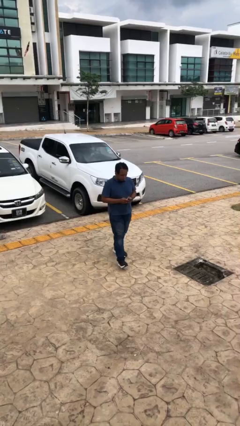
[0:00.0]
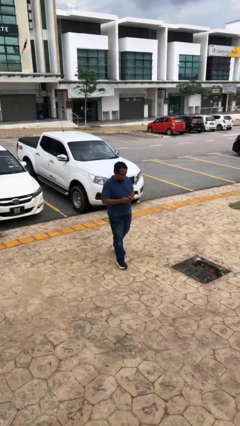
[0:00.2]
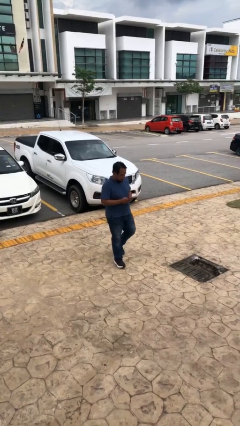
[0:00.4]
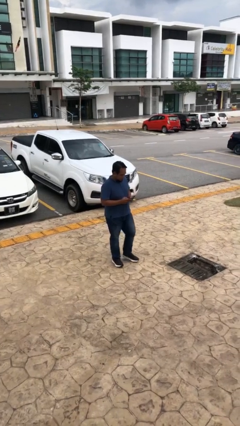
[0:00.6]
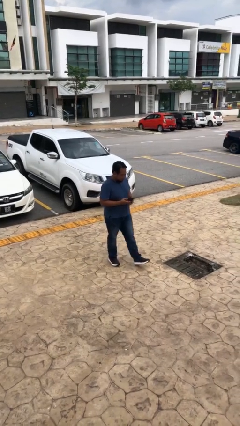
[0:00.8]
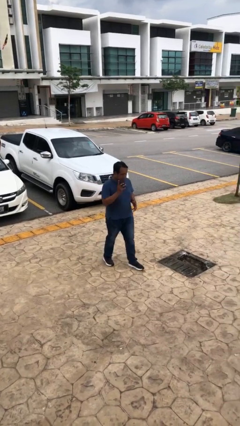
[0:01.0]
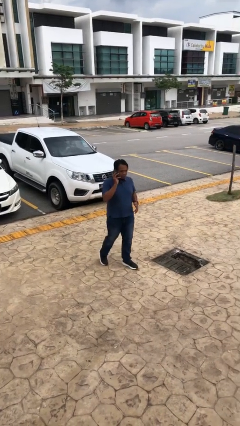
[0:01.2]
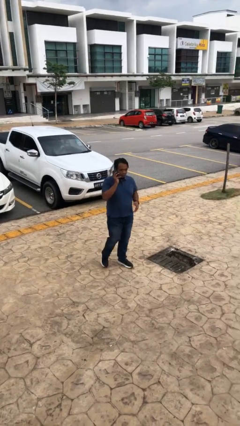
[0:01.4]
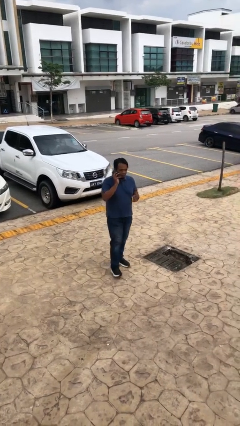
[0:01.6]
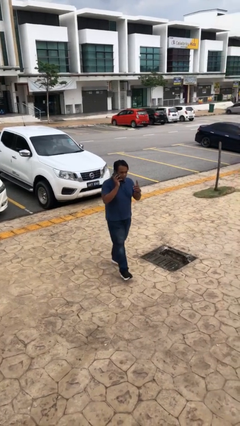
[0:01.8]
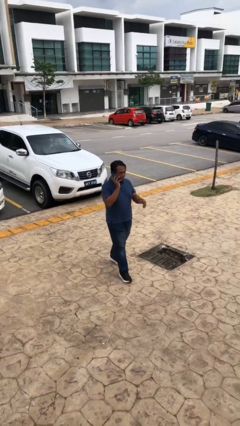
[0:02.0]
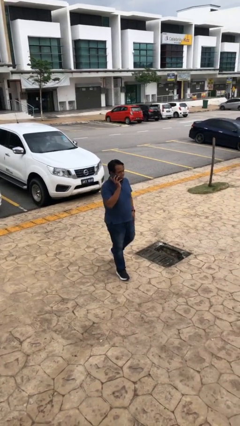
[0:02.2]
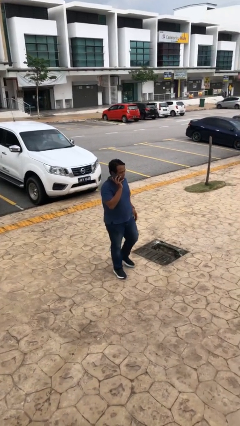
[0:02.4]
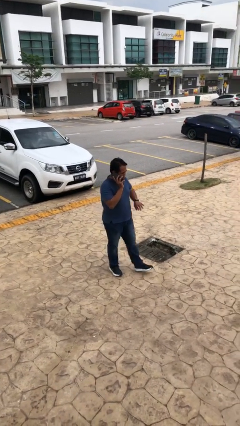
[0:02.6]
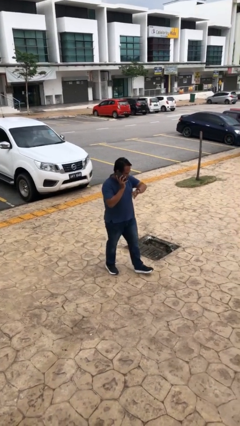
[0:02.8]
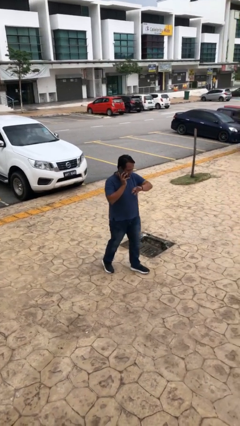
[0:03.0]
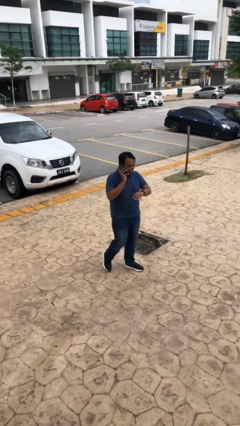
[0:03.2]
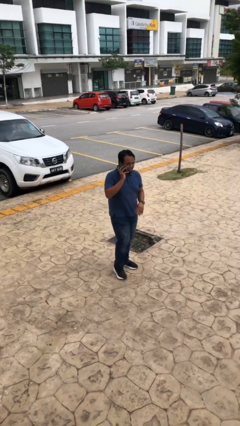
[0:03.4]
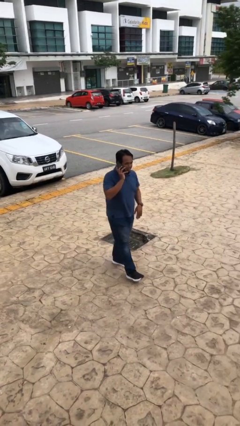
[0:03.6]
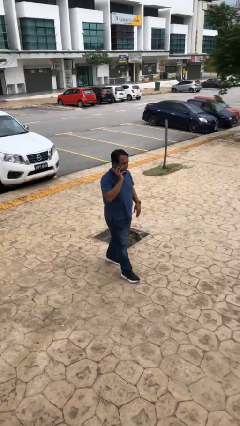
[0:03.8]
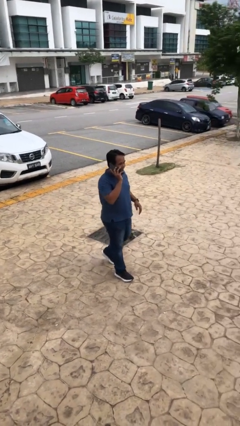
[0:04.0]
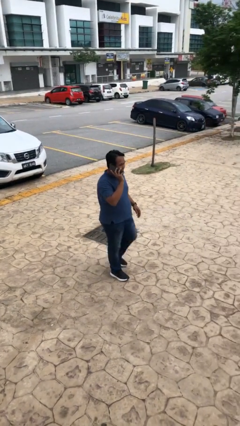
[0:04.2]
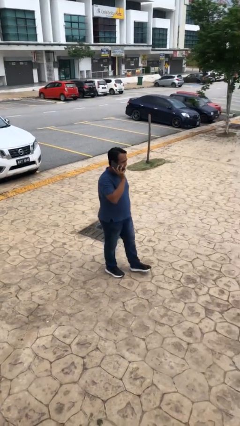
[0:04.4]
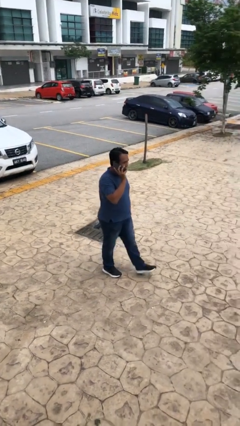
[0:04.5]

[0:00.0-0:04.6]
person talks on phone

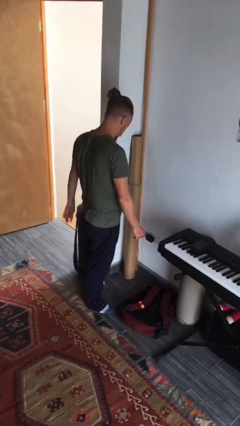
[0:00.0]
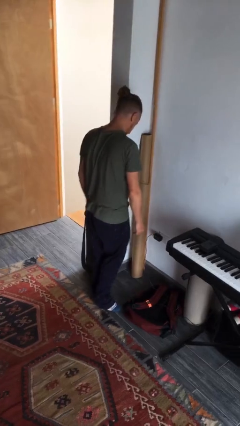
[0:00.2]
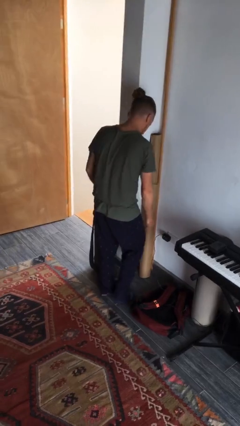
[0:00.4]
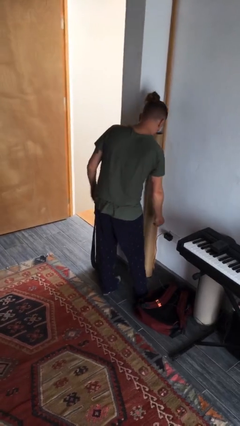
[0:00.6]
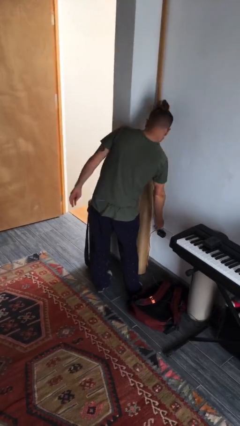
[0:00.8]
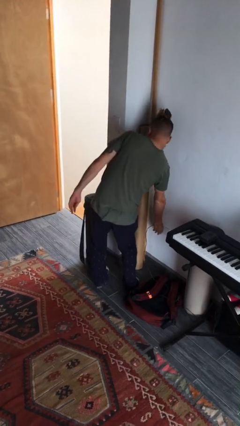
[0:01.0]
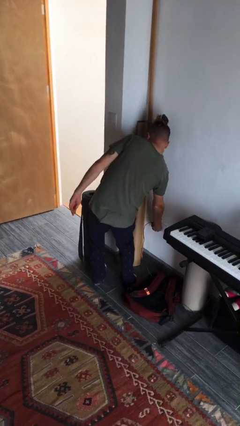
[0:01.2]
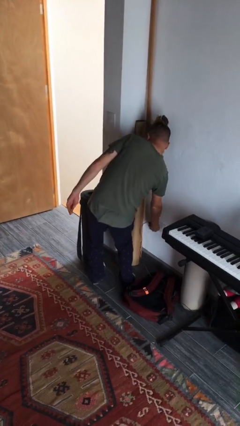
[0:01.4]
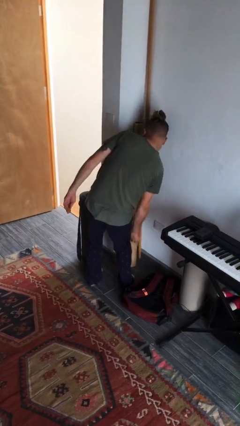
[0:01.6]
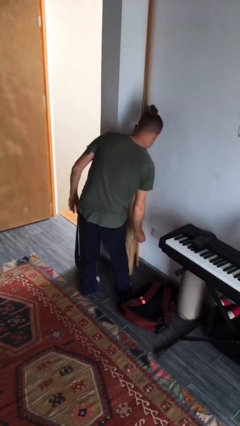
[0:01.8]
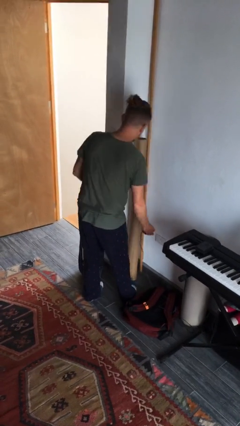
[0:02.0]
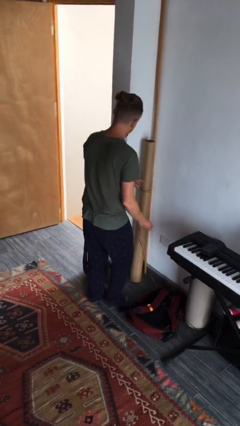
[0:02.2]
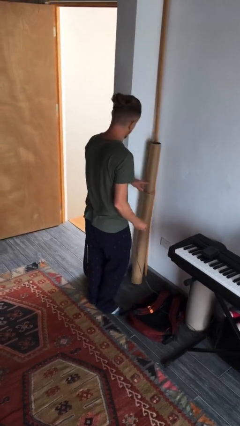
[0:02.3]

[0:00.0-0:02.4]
person unplugs from electrical socket

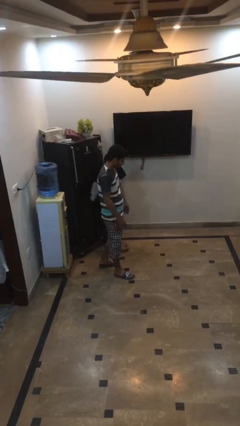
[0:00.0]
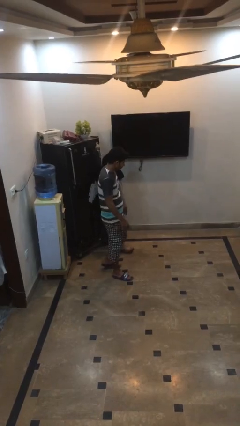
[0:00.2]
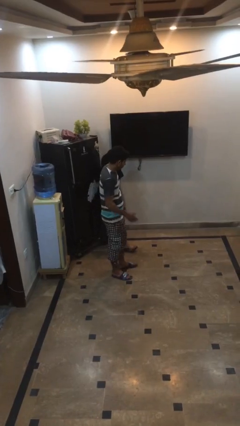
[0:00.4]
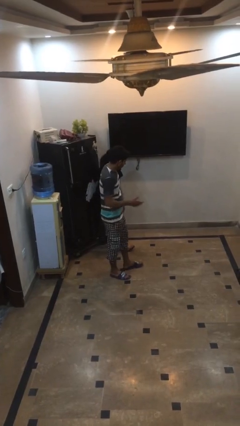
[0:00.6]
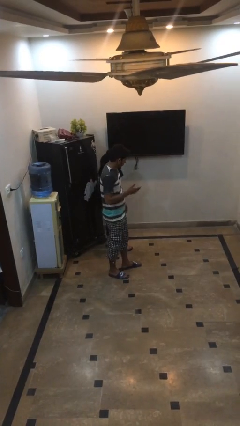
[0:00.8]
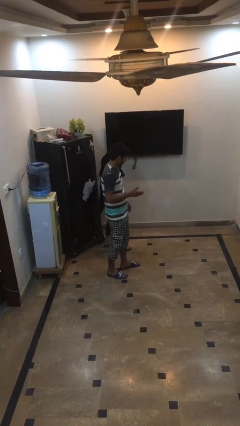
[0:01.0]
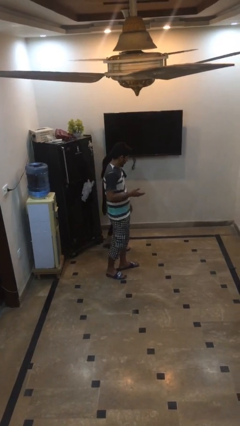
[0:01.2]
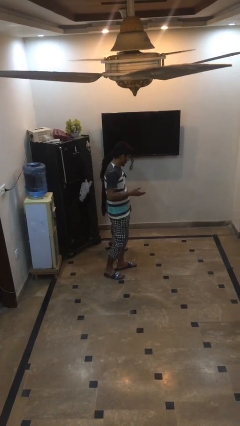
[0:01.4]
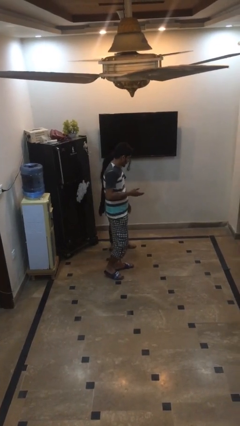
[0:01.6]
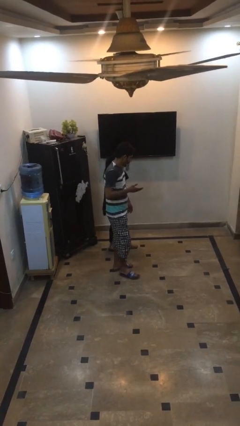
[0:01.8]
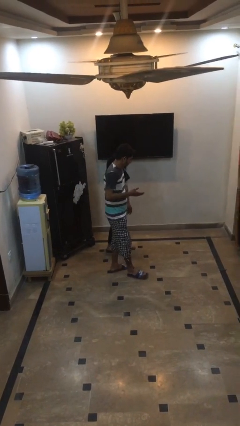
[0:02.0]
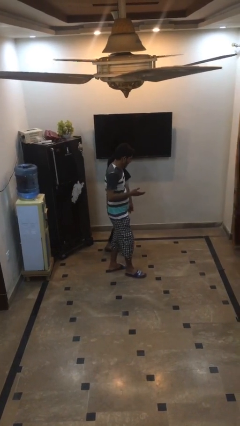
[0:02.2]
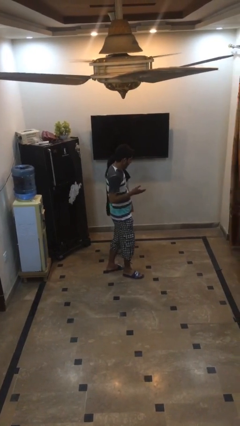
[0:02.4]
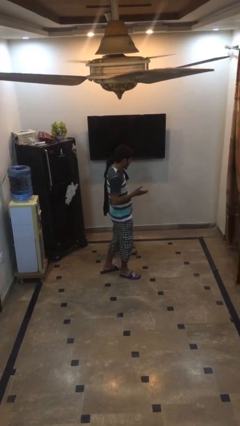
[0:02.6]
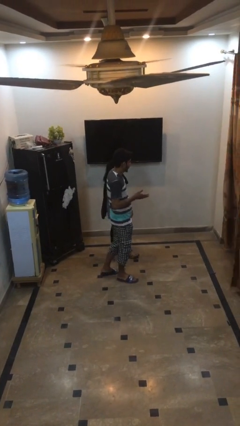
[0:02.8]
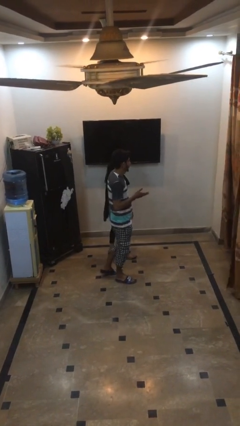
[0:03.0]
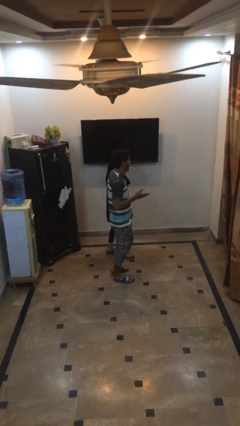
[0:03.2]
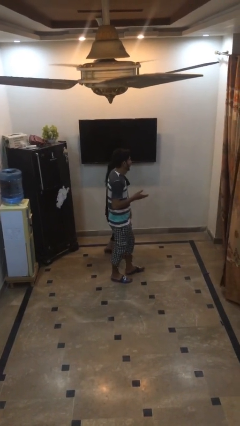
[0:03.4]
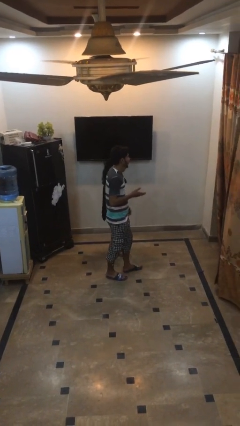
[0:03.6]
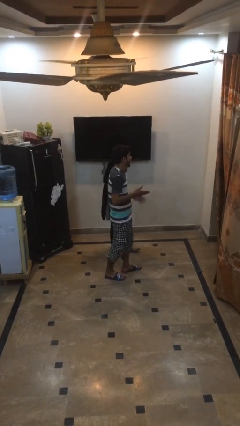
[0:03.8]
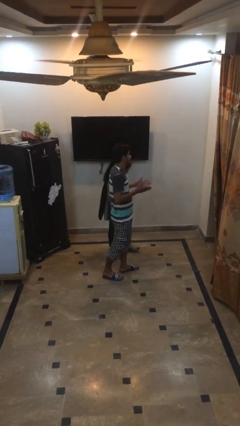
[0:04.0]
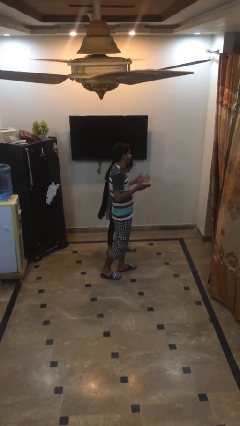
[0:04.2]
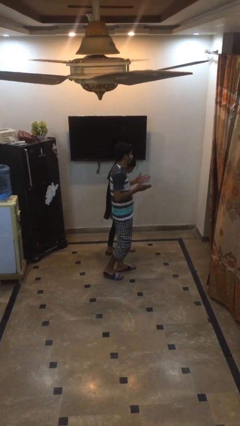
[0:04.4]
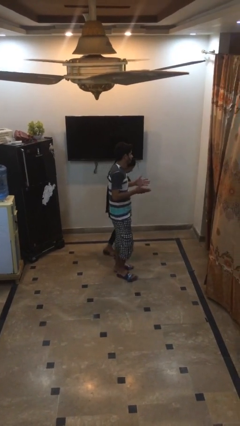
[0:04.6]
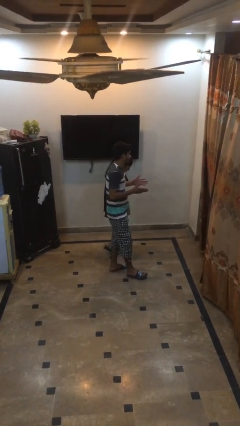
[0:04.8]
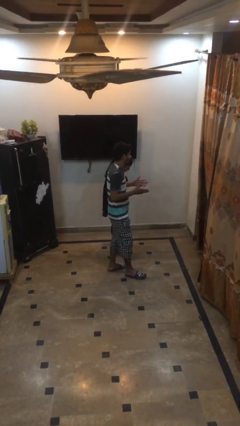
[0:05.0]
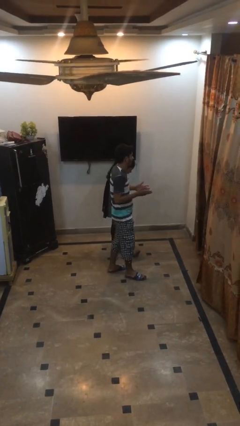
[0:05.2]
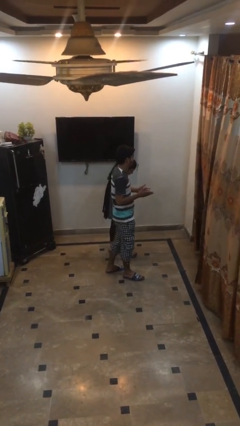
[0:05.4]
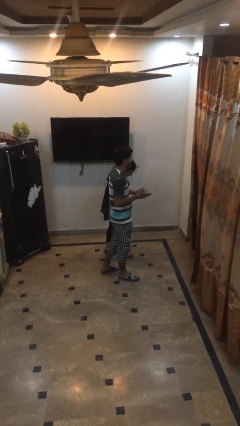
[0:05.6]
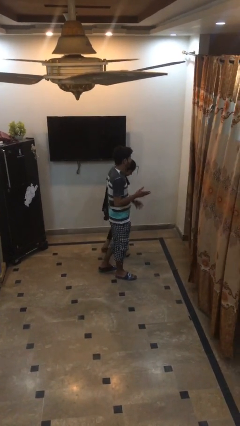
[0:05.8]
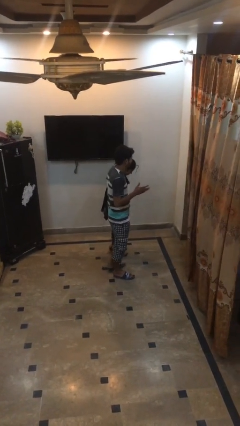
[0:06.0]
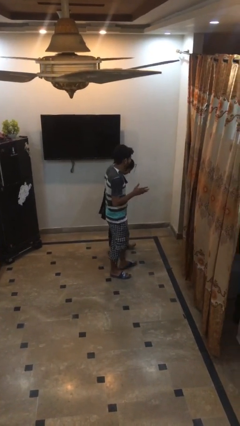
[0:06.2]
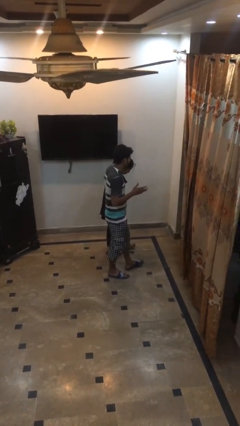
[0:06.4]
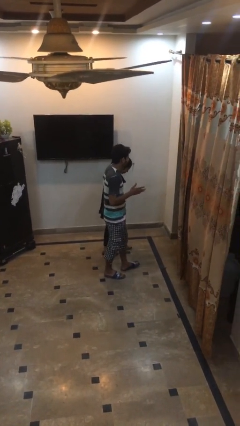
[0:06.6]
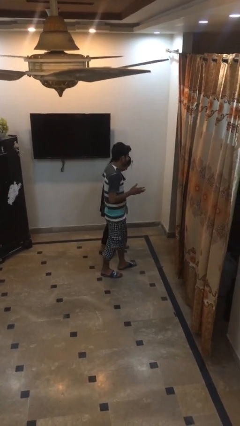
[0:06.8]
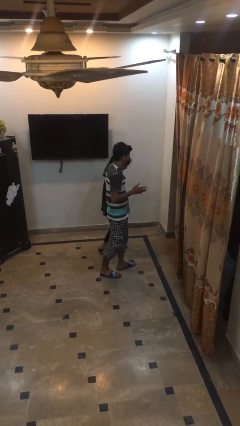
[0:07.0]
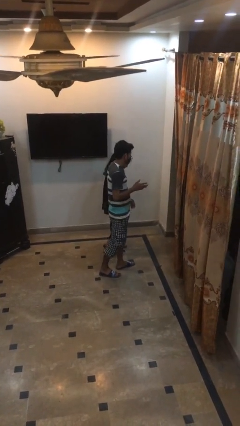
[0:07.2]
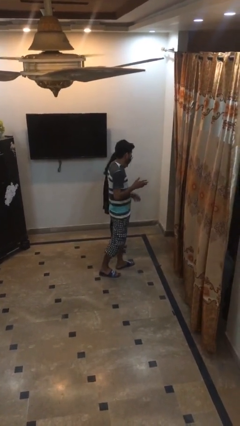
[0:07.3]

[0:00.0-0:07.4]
person talks to person

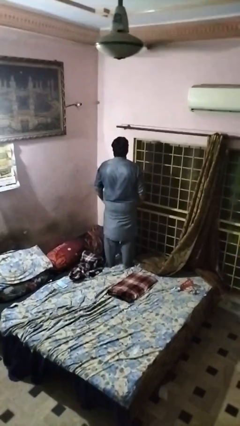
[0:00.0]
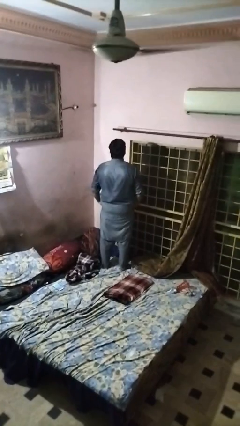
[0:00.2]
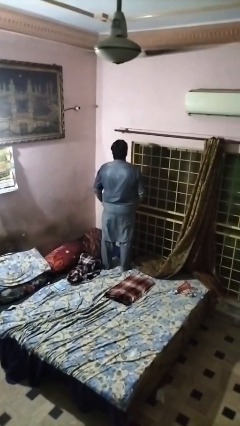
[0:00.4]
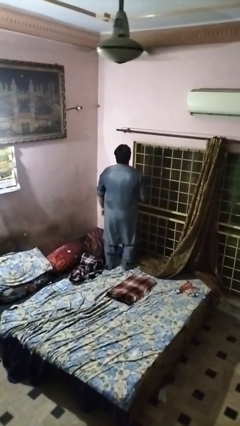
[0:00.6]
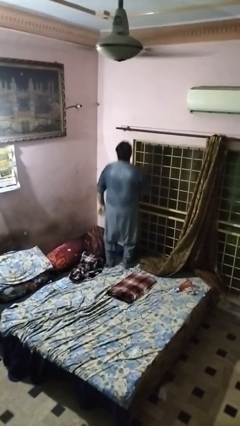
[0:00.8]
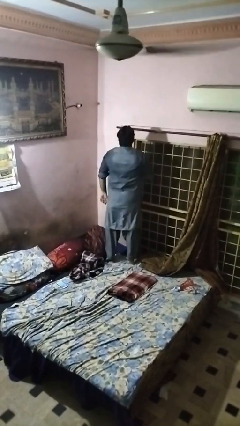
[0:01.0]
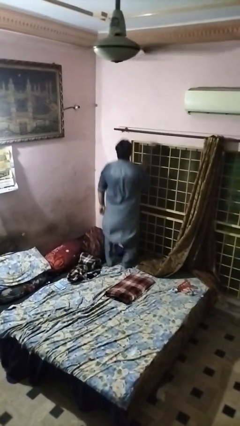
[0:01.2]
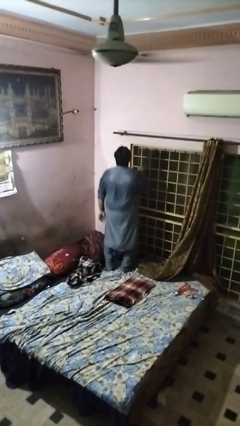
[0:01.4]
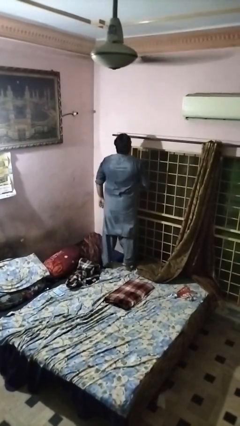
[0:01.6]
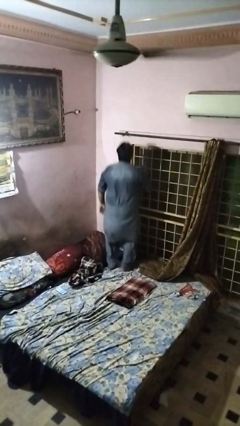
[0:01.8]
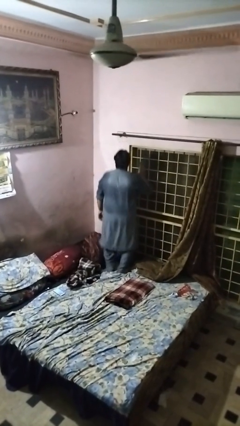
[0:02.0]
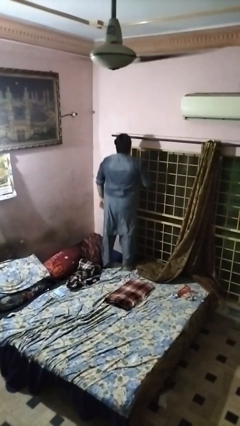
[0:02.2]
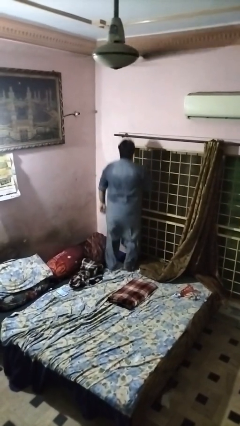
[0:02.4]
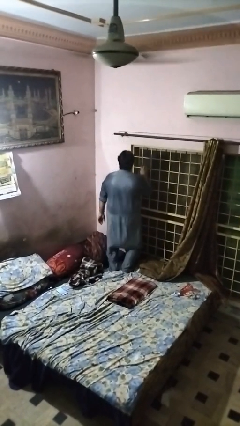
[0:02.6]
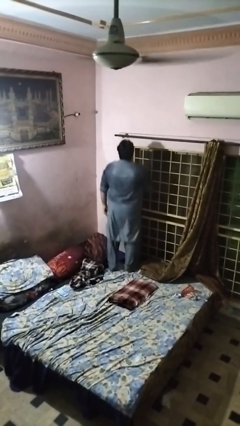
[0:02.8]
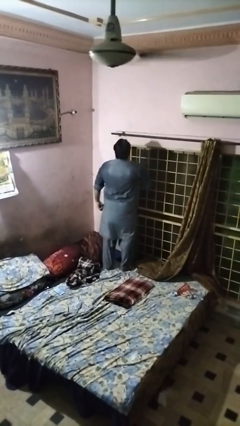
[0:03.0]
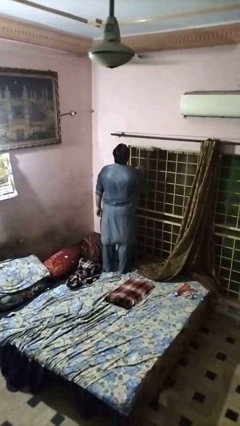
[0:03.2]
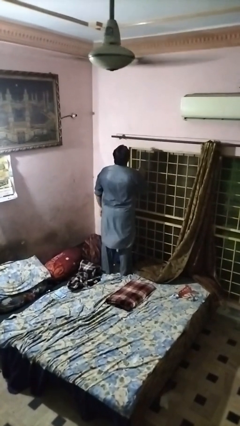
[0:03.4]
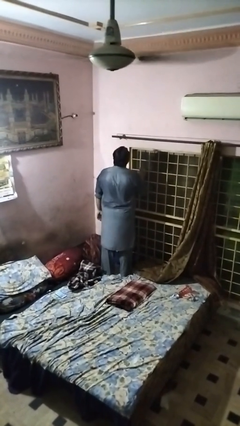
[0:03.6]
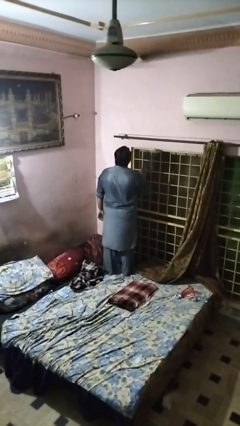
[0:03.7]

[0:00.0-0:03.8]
person jumps on bed
